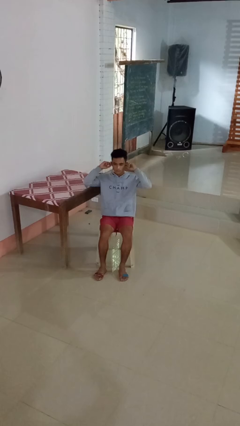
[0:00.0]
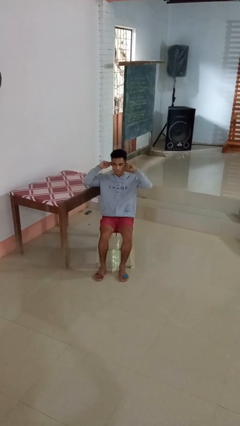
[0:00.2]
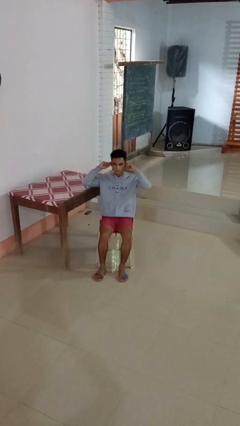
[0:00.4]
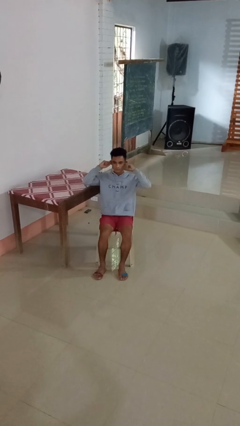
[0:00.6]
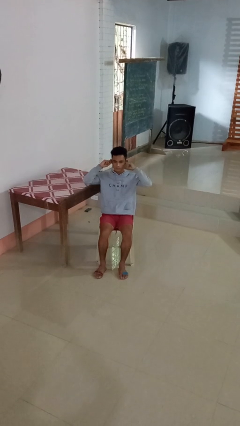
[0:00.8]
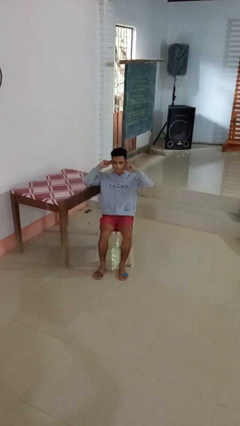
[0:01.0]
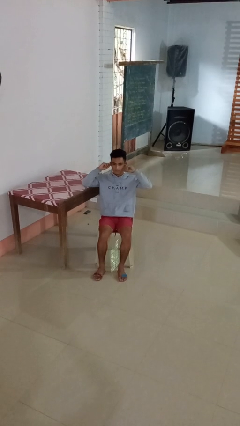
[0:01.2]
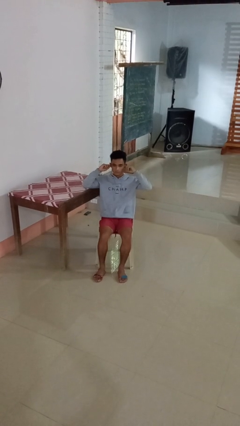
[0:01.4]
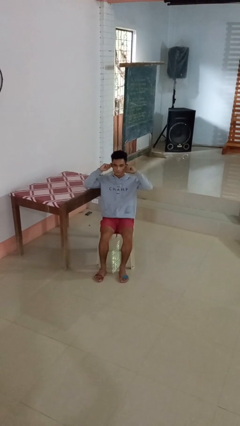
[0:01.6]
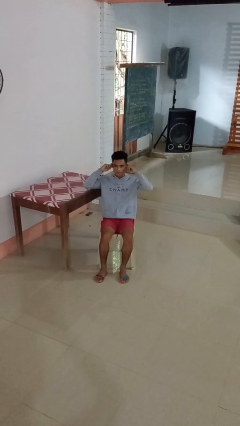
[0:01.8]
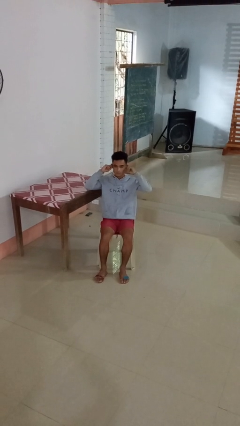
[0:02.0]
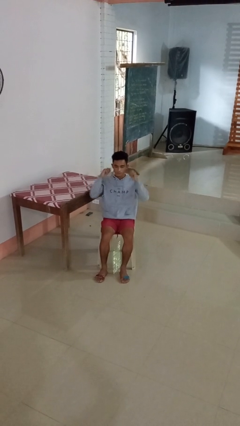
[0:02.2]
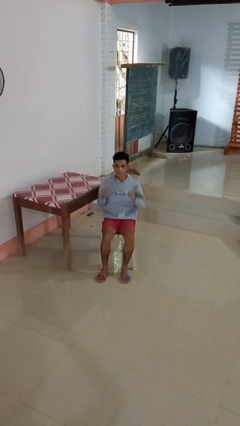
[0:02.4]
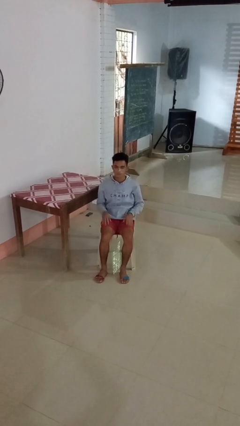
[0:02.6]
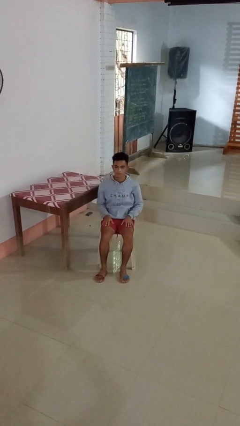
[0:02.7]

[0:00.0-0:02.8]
person puts fingers in ear

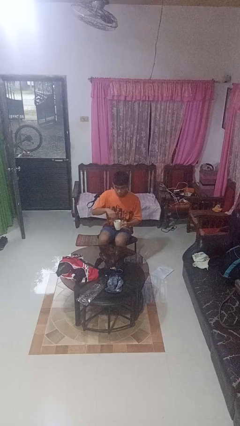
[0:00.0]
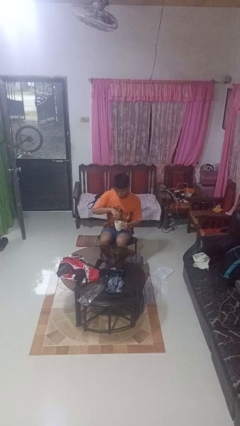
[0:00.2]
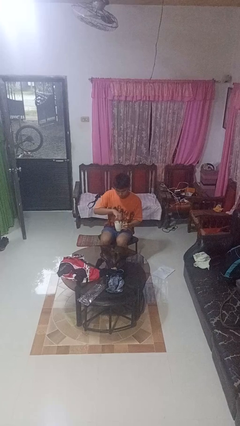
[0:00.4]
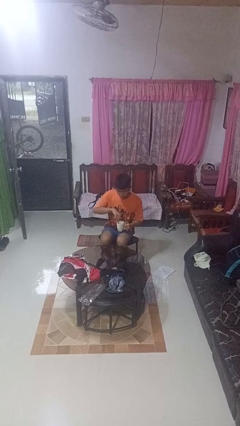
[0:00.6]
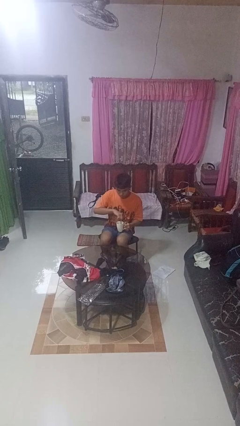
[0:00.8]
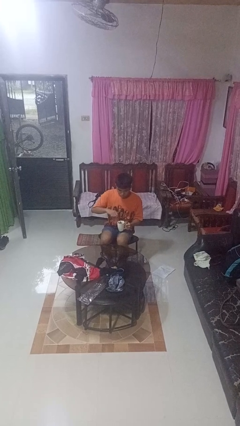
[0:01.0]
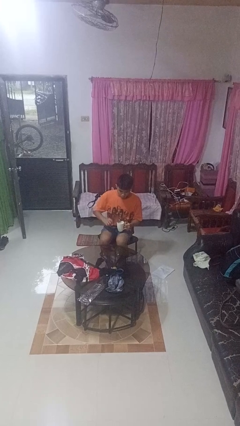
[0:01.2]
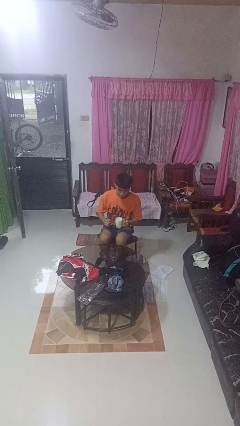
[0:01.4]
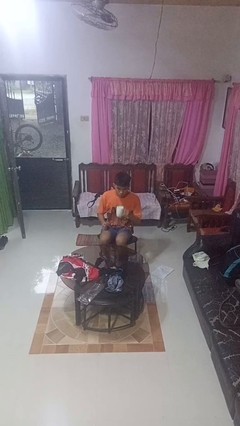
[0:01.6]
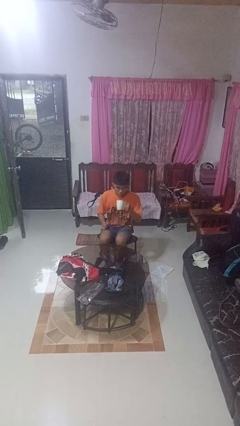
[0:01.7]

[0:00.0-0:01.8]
person stirs mug

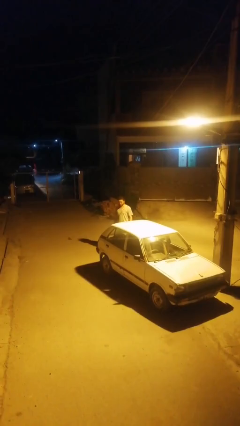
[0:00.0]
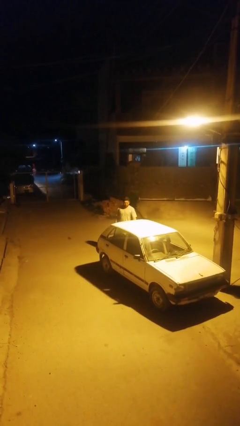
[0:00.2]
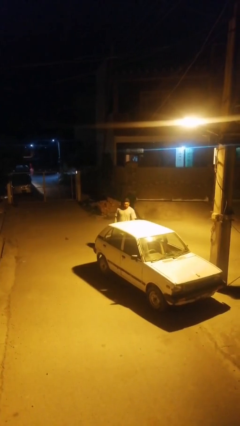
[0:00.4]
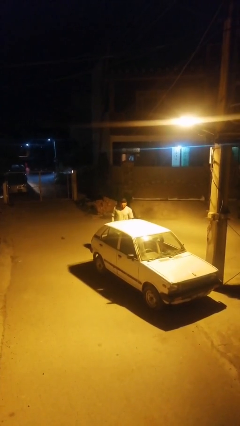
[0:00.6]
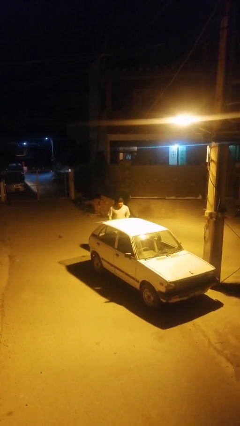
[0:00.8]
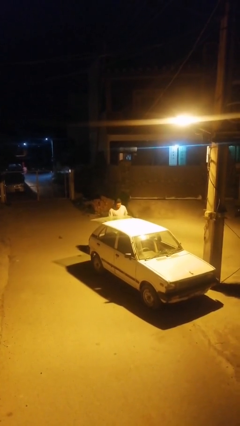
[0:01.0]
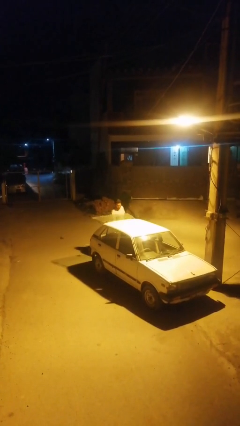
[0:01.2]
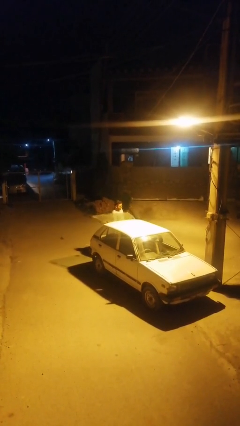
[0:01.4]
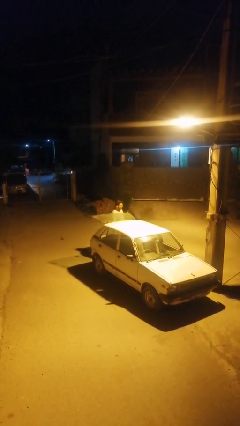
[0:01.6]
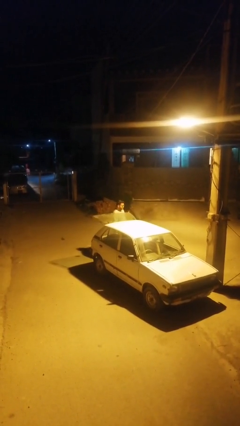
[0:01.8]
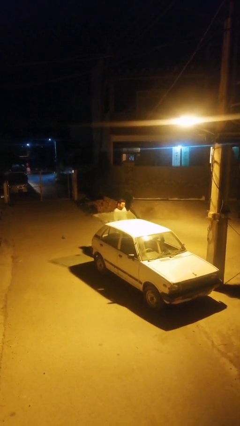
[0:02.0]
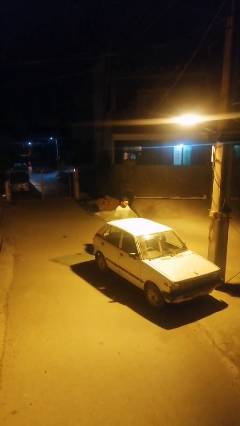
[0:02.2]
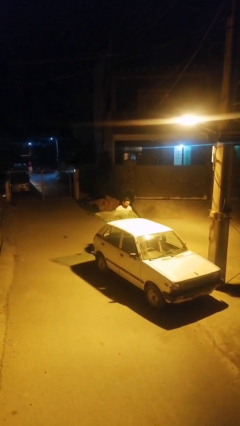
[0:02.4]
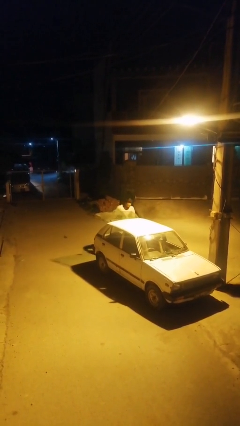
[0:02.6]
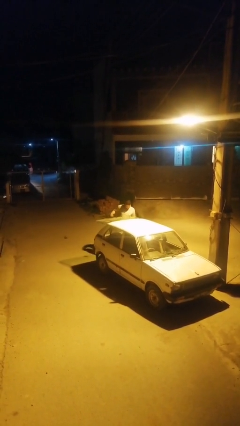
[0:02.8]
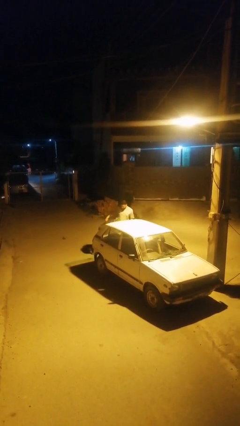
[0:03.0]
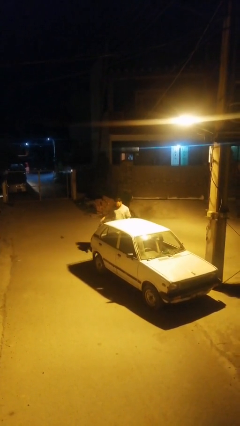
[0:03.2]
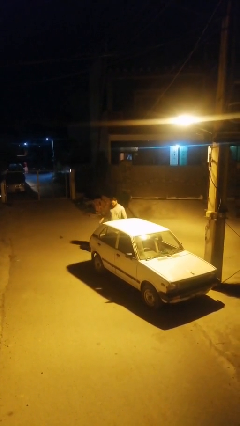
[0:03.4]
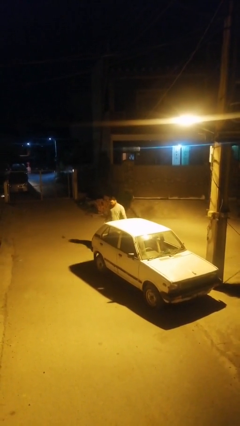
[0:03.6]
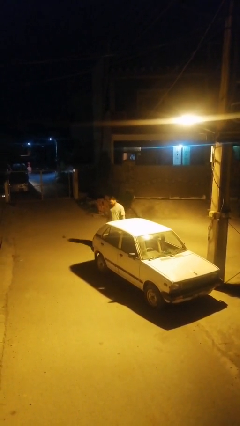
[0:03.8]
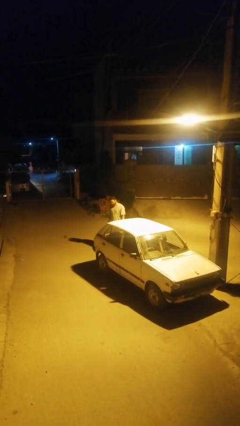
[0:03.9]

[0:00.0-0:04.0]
person unloads car

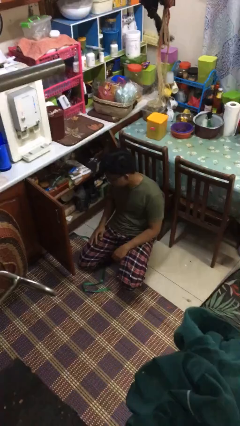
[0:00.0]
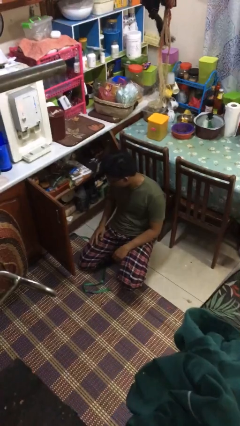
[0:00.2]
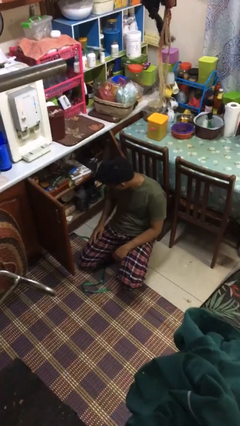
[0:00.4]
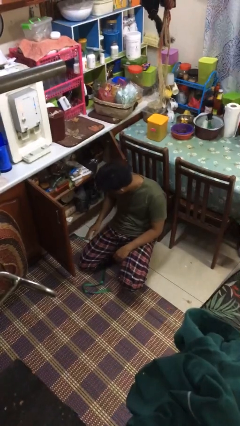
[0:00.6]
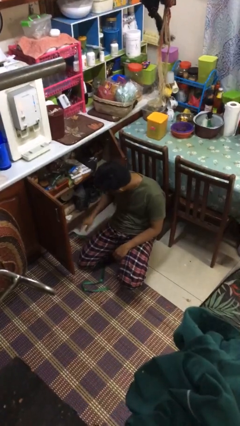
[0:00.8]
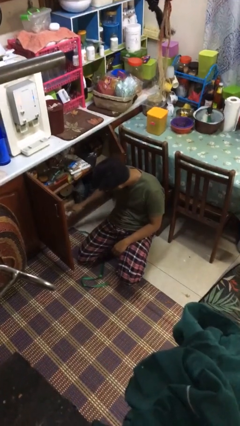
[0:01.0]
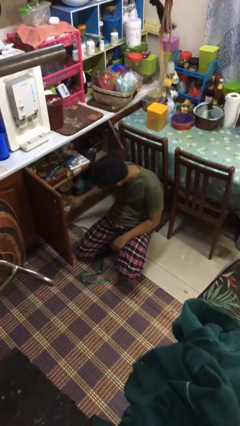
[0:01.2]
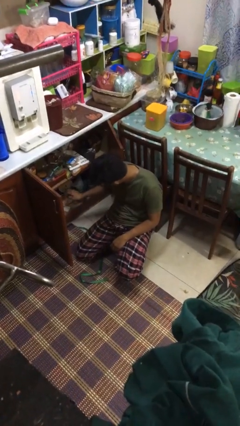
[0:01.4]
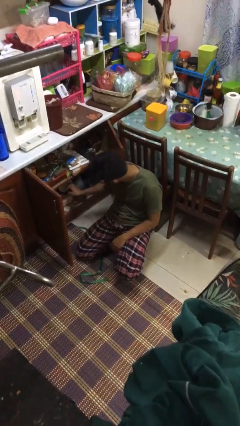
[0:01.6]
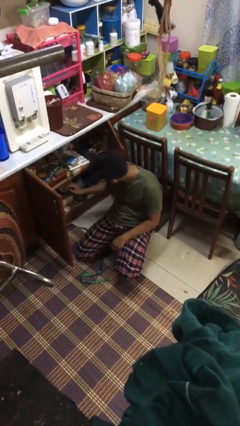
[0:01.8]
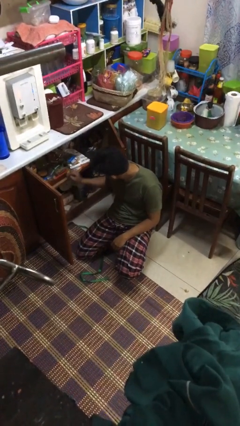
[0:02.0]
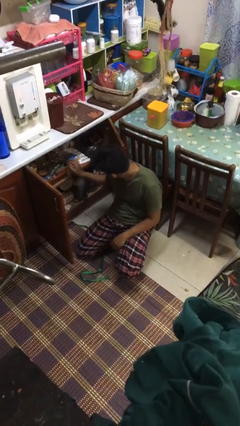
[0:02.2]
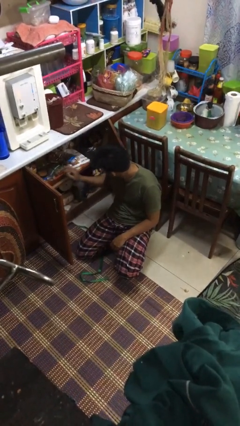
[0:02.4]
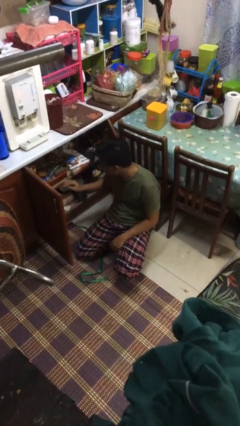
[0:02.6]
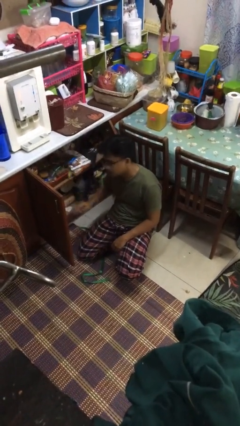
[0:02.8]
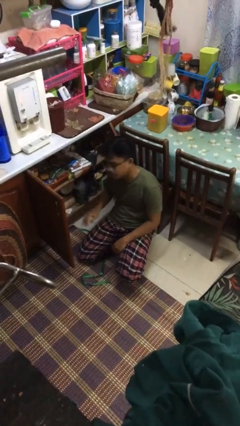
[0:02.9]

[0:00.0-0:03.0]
person searches in kitchen drawer

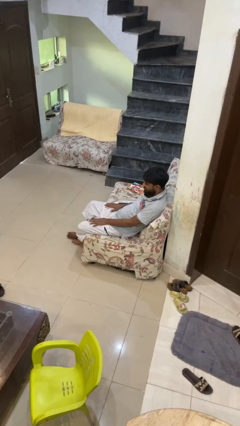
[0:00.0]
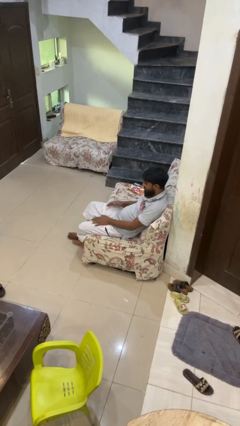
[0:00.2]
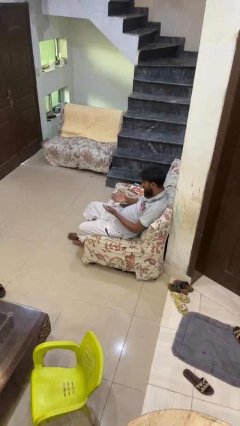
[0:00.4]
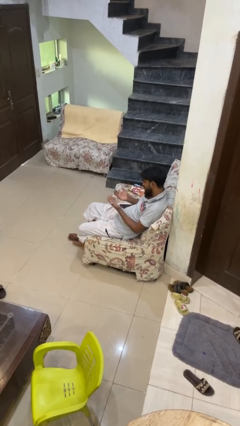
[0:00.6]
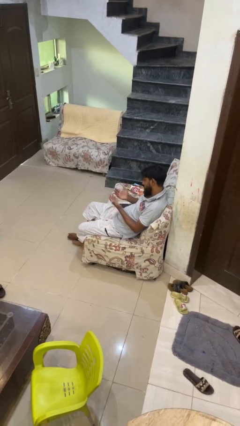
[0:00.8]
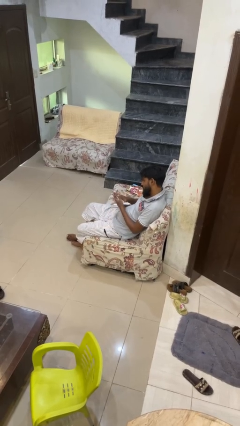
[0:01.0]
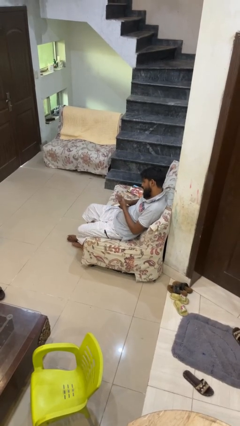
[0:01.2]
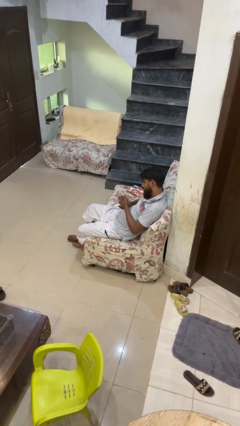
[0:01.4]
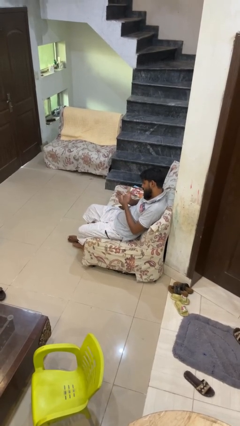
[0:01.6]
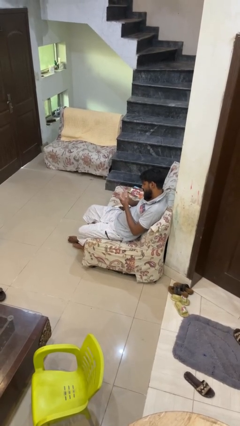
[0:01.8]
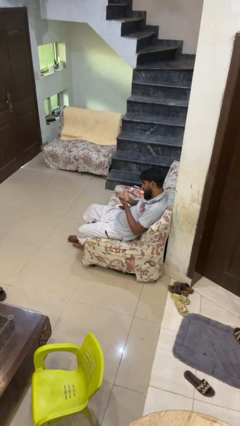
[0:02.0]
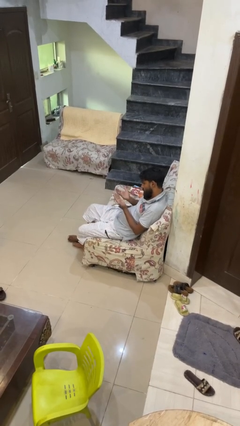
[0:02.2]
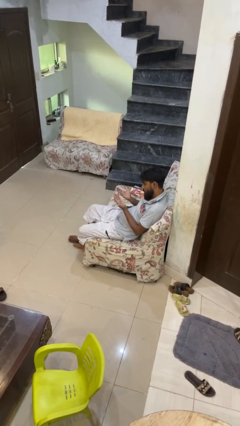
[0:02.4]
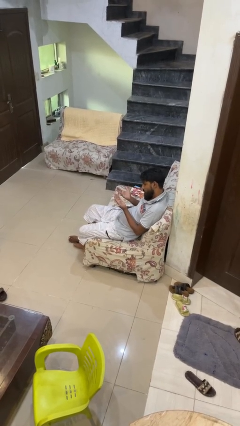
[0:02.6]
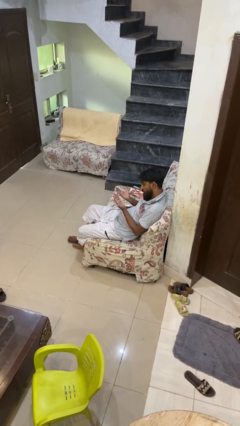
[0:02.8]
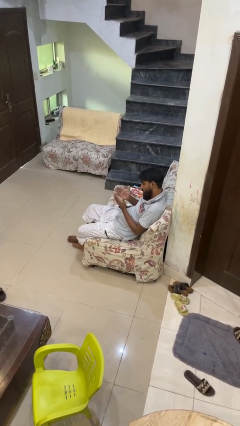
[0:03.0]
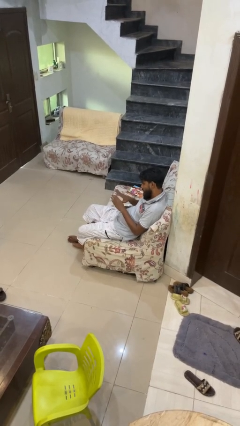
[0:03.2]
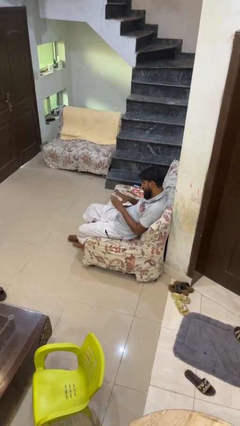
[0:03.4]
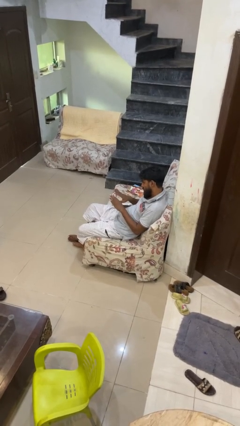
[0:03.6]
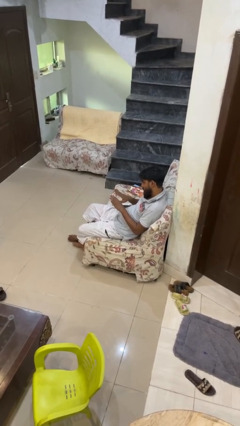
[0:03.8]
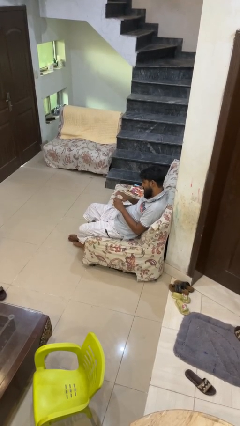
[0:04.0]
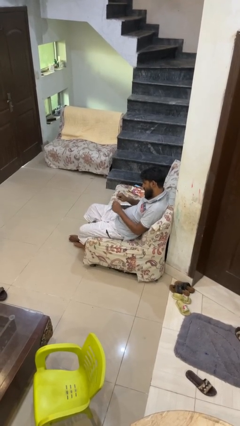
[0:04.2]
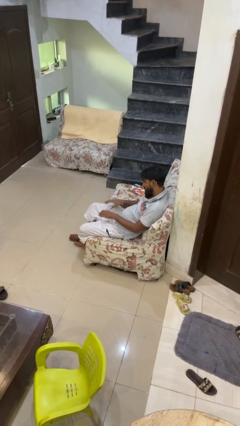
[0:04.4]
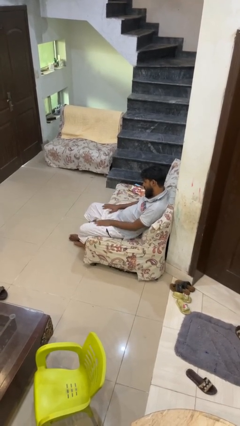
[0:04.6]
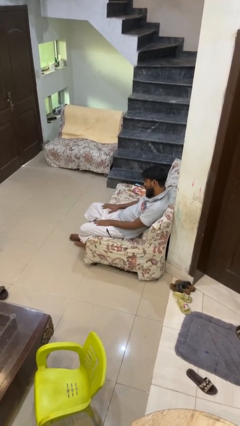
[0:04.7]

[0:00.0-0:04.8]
person looks at hands in lap

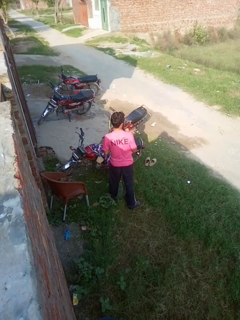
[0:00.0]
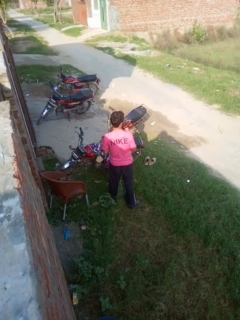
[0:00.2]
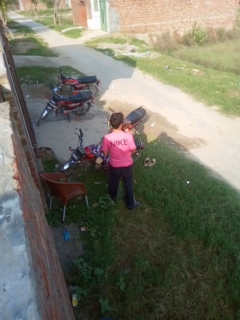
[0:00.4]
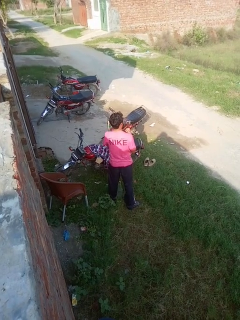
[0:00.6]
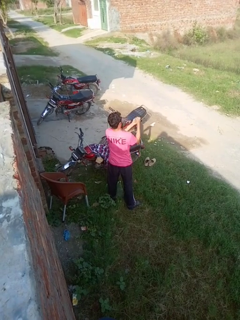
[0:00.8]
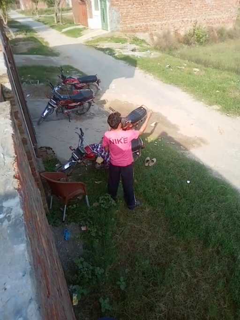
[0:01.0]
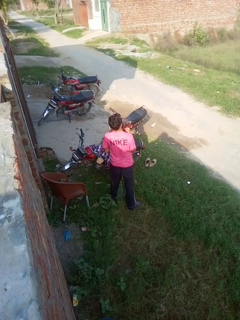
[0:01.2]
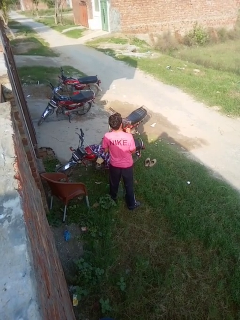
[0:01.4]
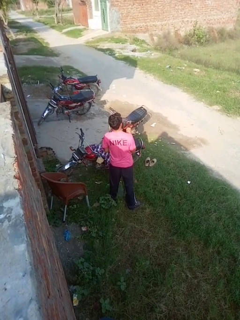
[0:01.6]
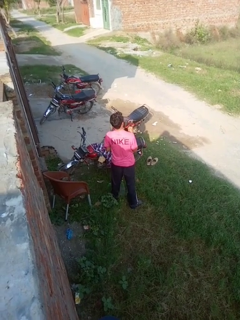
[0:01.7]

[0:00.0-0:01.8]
person punches
